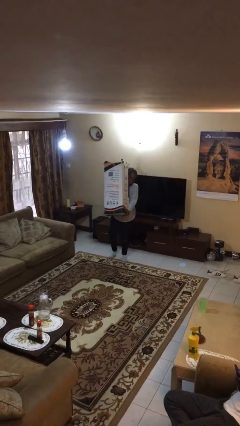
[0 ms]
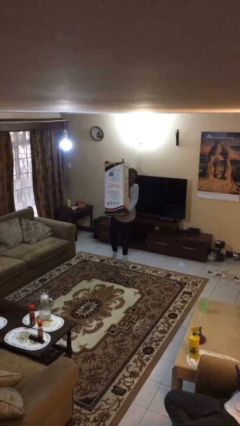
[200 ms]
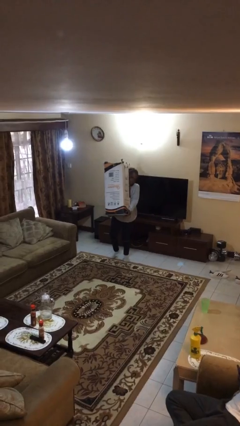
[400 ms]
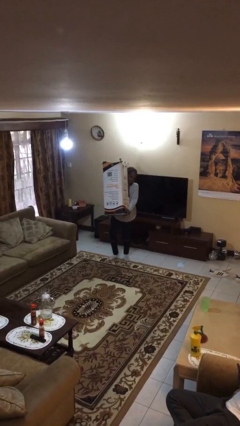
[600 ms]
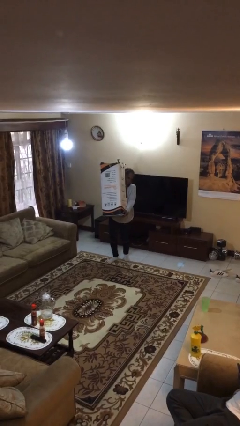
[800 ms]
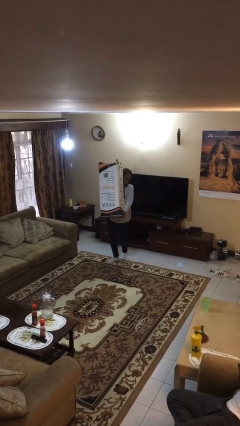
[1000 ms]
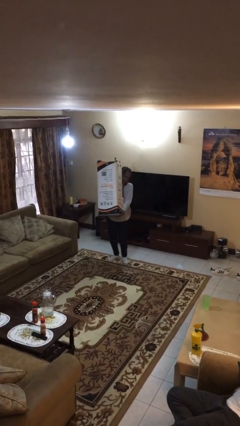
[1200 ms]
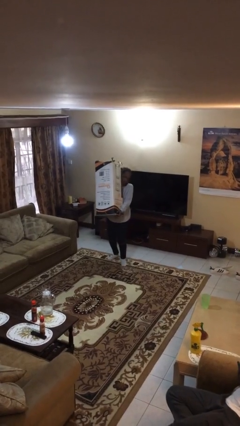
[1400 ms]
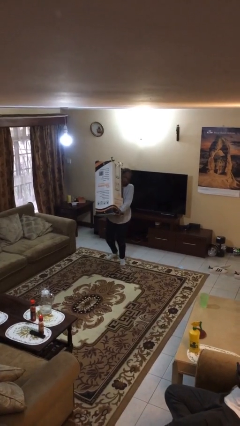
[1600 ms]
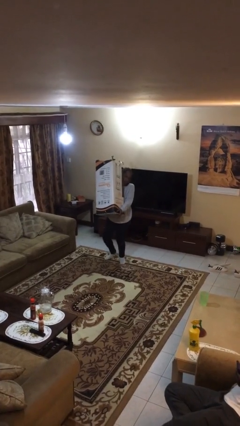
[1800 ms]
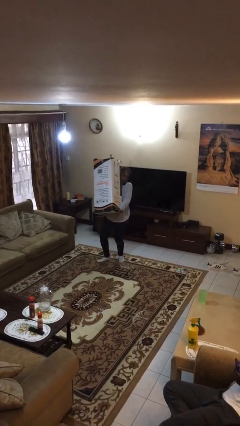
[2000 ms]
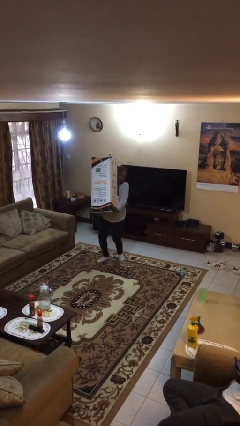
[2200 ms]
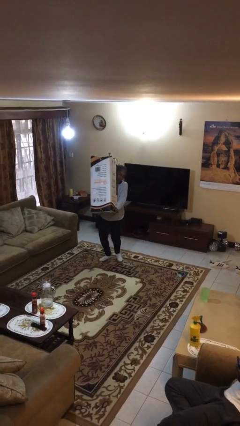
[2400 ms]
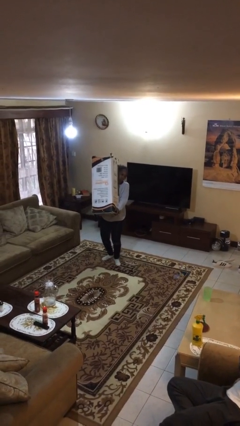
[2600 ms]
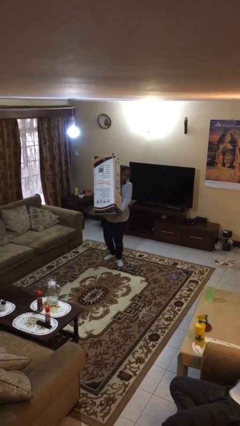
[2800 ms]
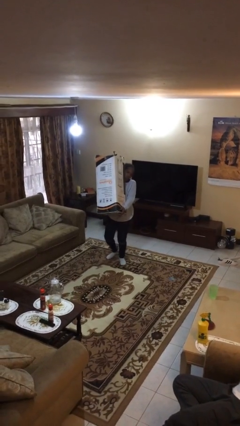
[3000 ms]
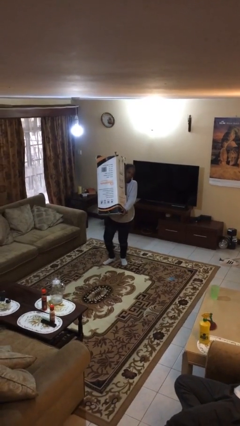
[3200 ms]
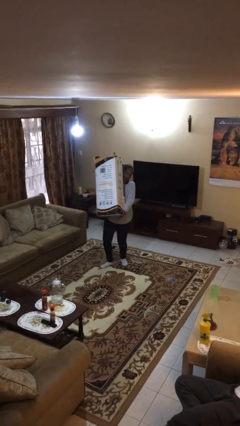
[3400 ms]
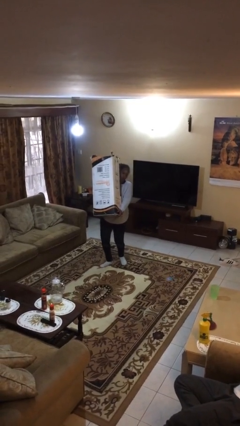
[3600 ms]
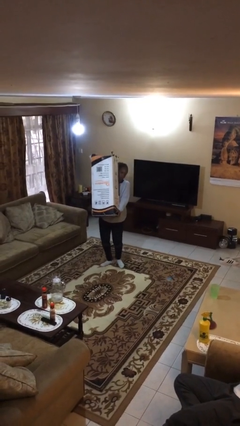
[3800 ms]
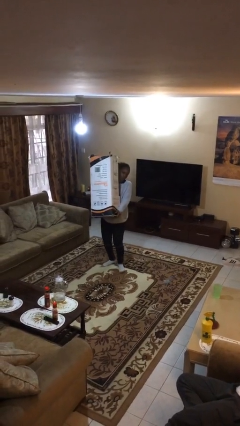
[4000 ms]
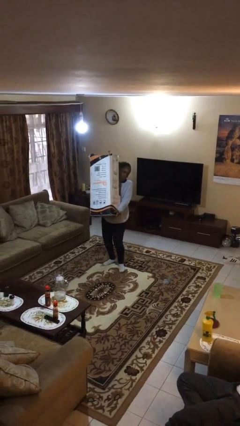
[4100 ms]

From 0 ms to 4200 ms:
person carries heavy object

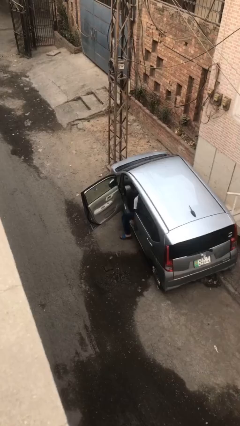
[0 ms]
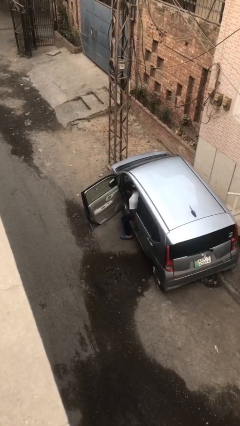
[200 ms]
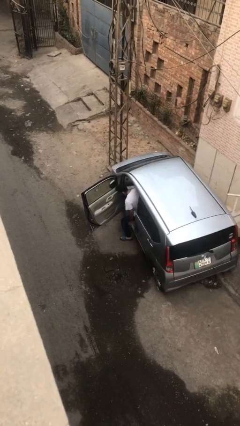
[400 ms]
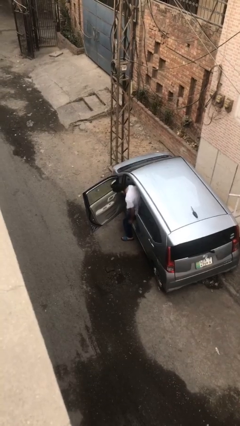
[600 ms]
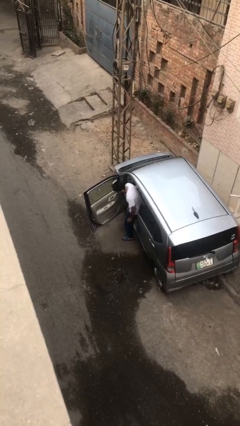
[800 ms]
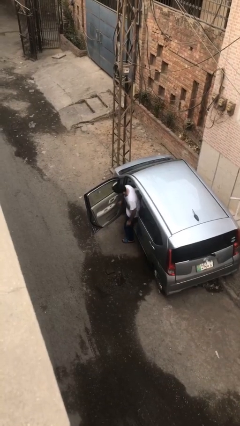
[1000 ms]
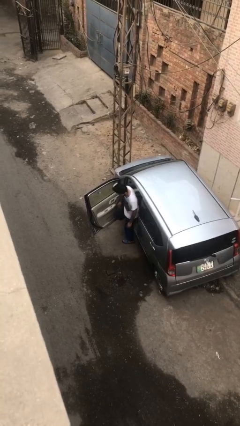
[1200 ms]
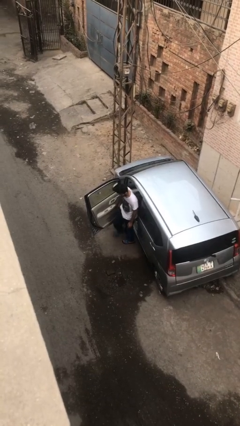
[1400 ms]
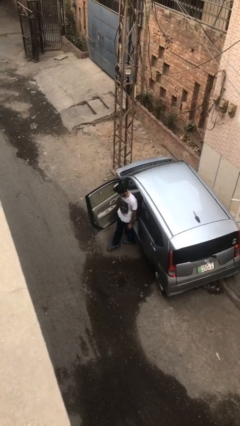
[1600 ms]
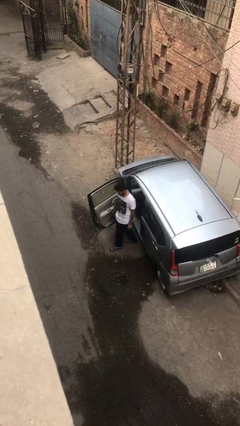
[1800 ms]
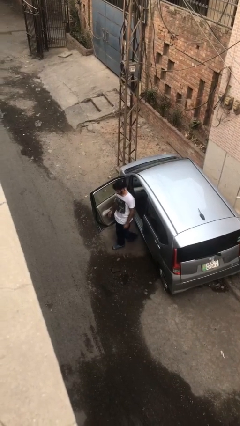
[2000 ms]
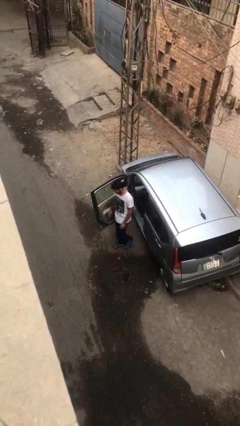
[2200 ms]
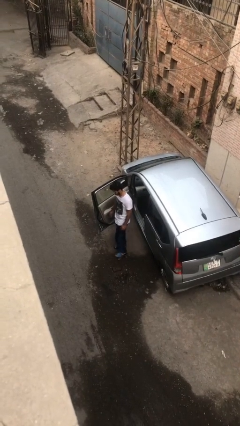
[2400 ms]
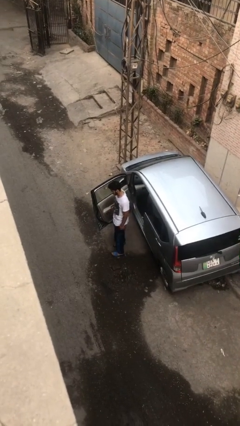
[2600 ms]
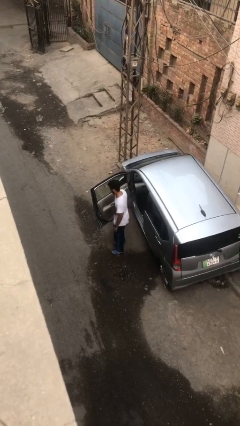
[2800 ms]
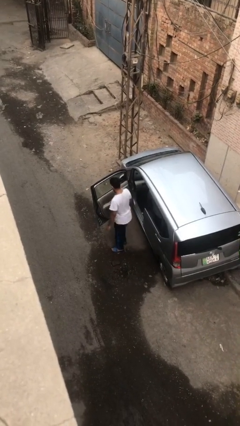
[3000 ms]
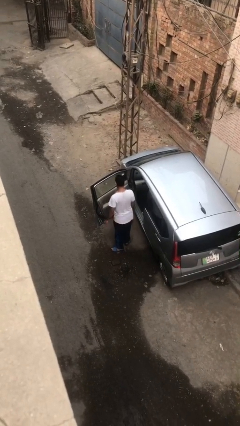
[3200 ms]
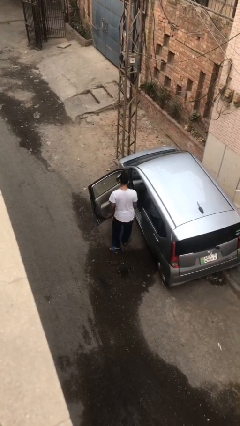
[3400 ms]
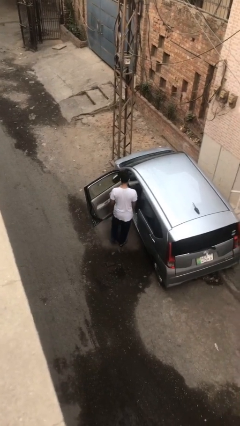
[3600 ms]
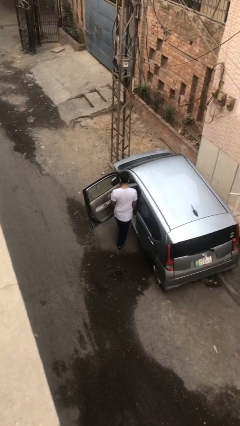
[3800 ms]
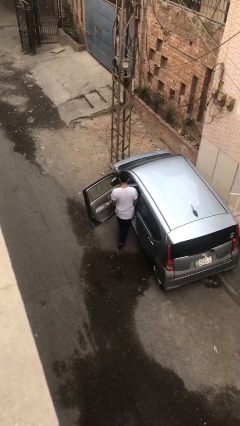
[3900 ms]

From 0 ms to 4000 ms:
person exits car

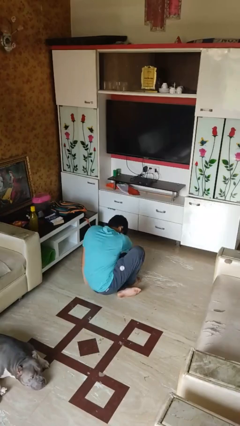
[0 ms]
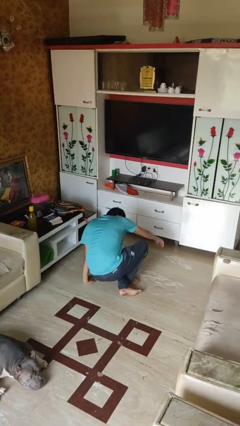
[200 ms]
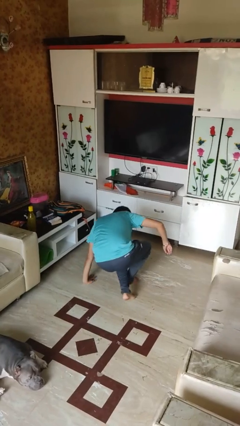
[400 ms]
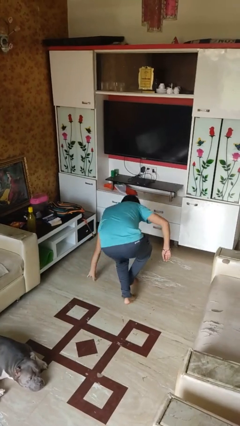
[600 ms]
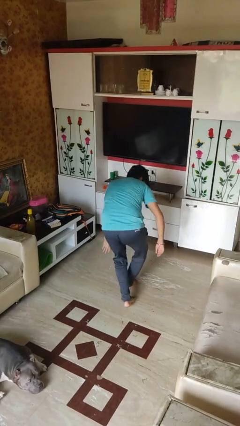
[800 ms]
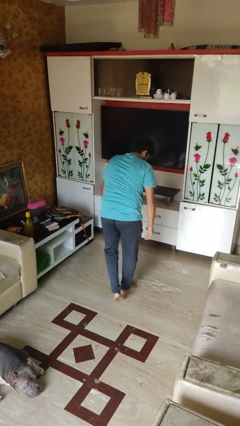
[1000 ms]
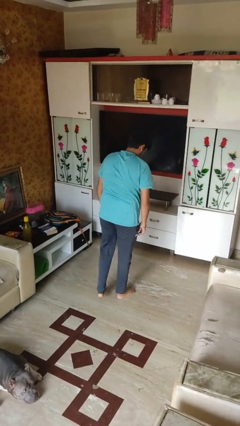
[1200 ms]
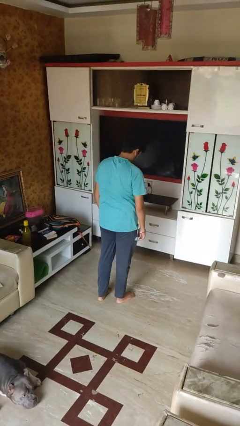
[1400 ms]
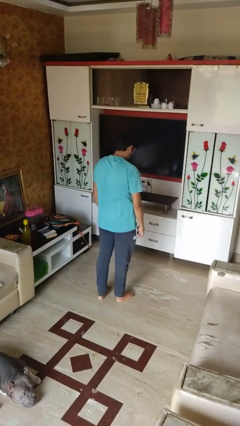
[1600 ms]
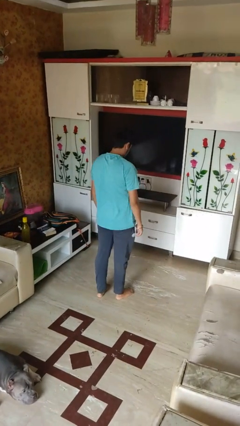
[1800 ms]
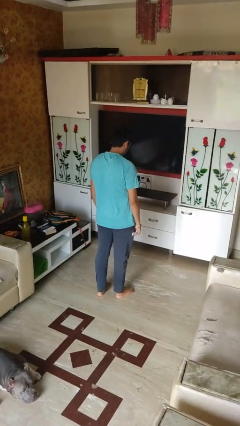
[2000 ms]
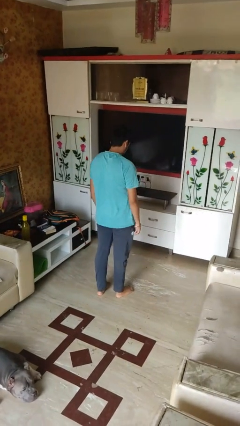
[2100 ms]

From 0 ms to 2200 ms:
person stands up from floor

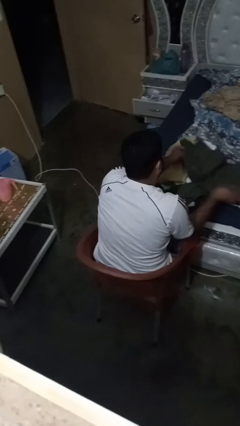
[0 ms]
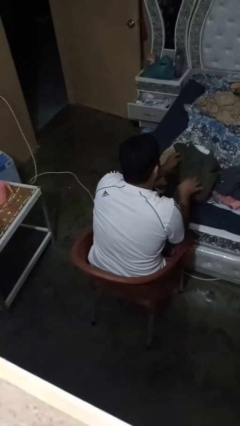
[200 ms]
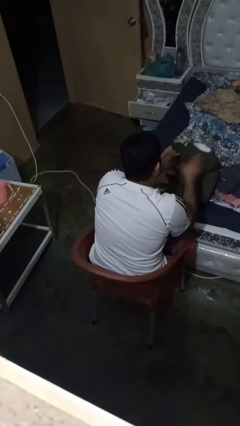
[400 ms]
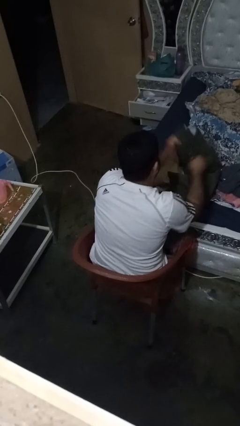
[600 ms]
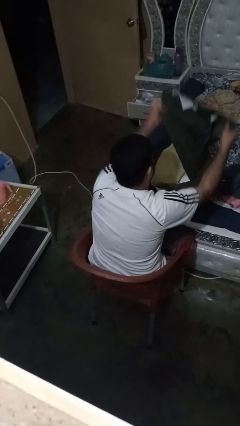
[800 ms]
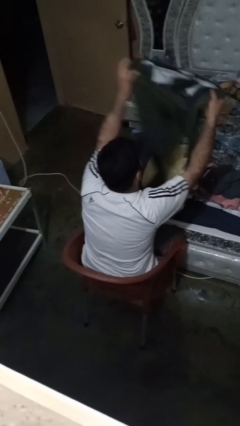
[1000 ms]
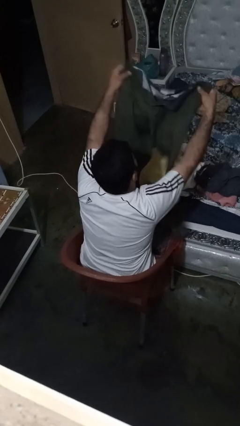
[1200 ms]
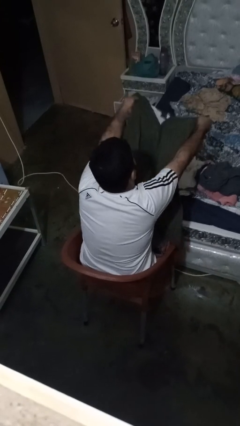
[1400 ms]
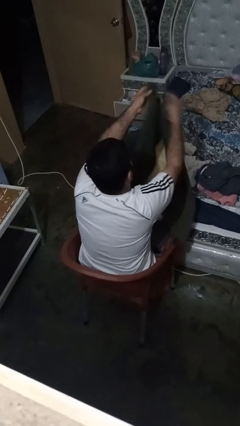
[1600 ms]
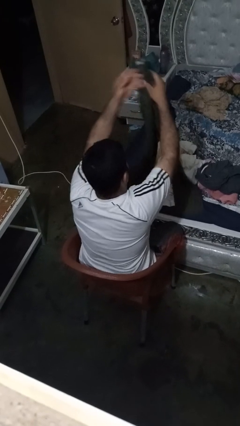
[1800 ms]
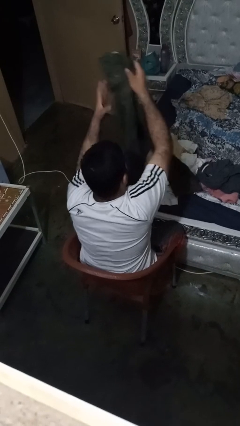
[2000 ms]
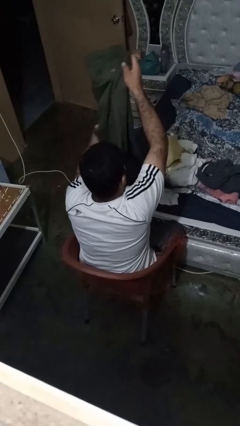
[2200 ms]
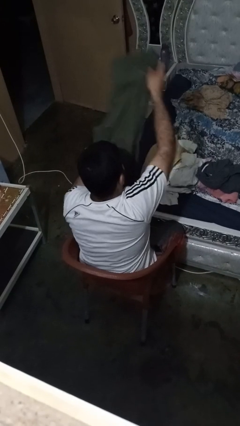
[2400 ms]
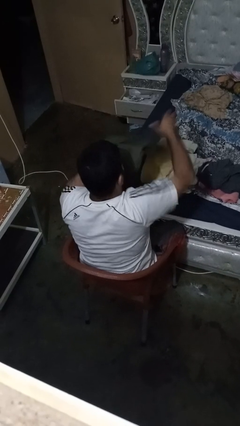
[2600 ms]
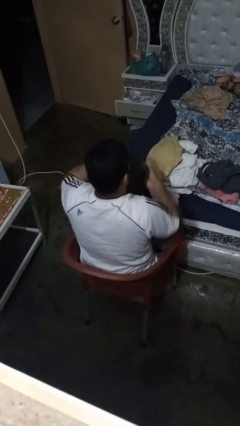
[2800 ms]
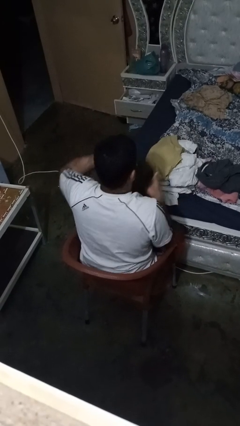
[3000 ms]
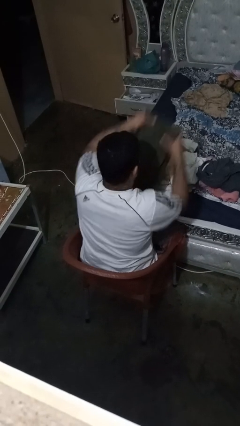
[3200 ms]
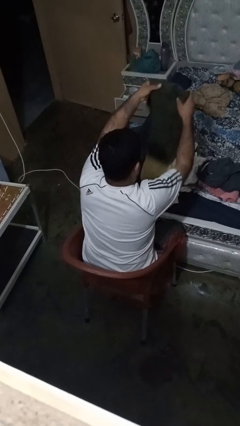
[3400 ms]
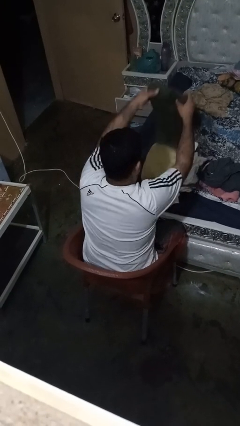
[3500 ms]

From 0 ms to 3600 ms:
person folds pants

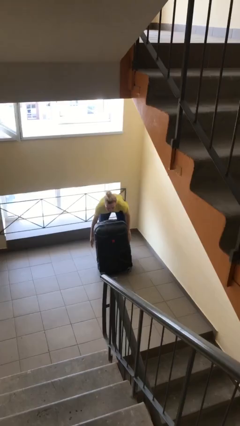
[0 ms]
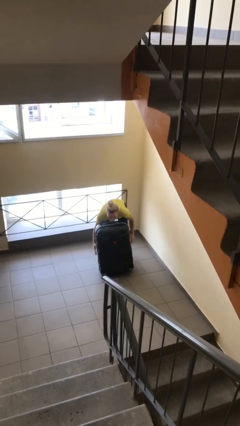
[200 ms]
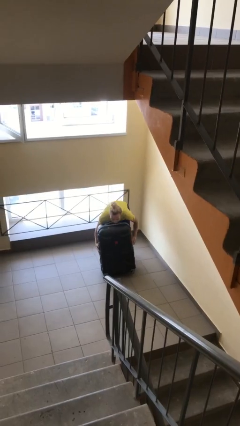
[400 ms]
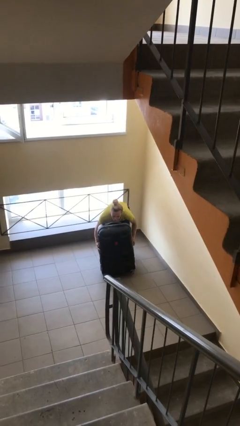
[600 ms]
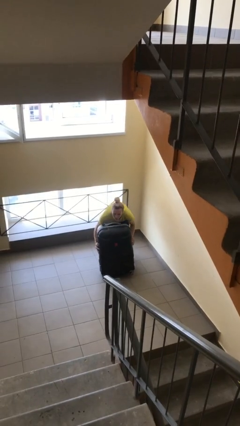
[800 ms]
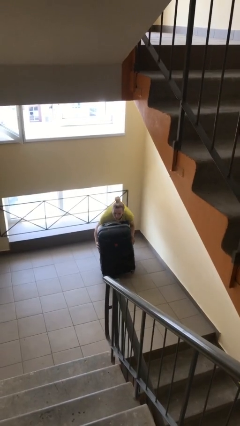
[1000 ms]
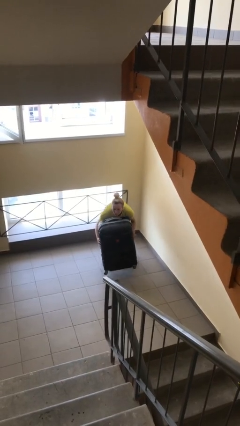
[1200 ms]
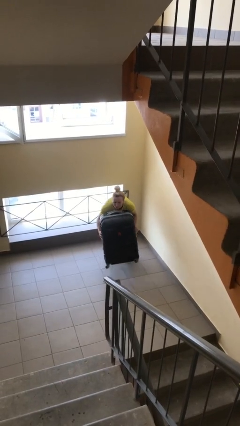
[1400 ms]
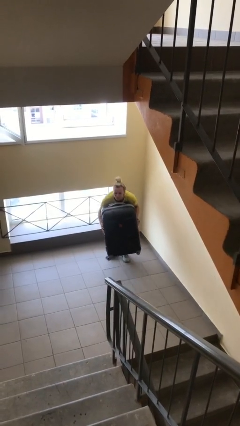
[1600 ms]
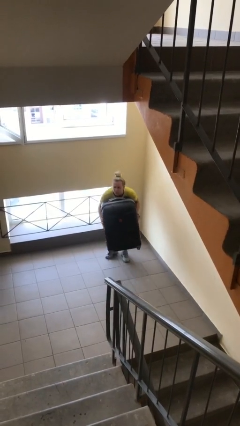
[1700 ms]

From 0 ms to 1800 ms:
person picks up object from floor

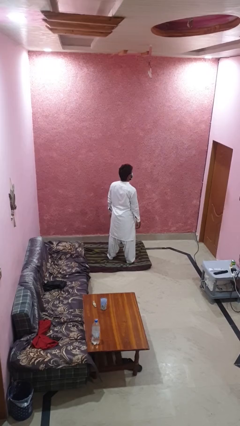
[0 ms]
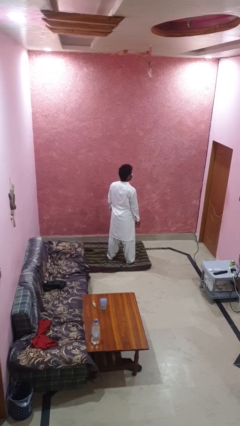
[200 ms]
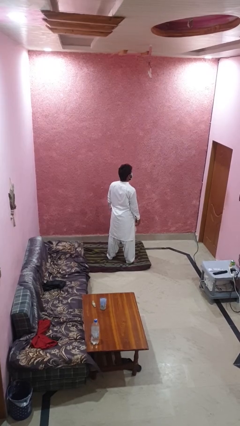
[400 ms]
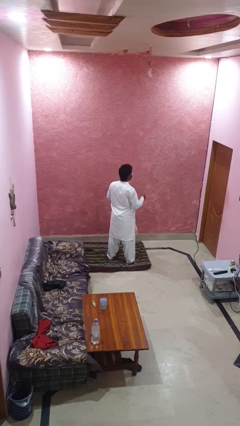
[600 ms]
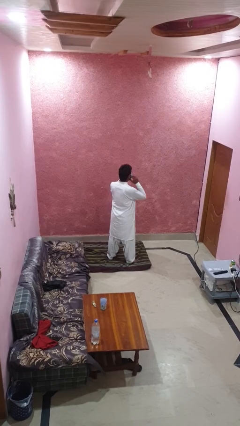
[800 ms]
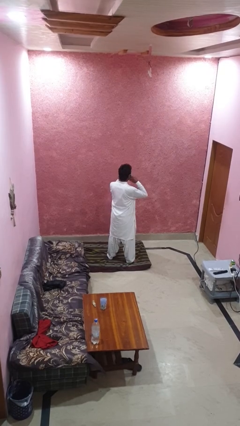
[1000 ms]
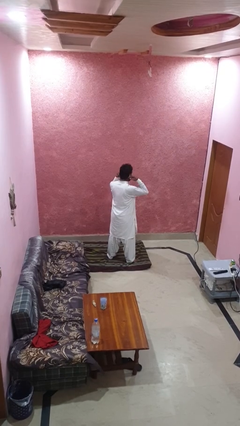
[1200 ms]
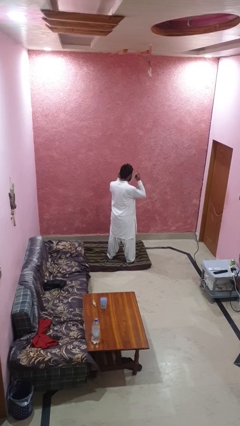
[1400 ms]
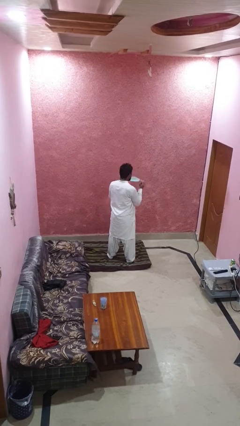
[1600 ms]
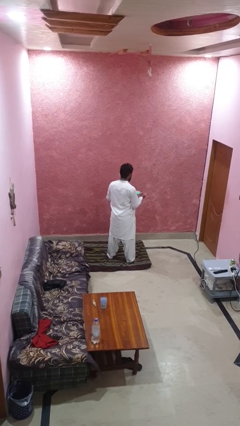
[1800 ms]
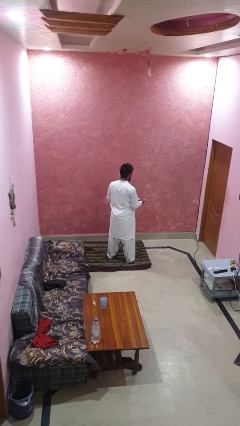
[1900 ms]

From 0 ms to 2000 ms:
person takes off facemask
